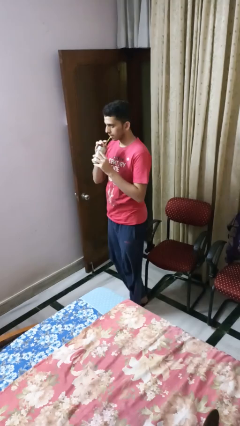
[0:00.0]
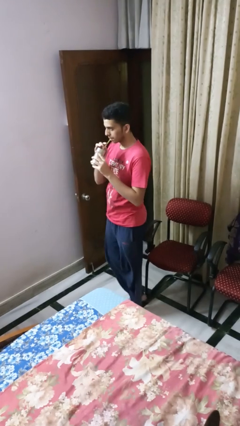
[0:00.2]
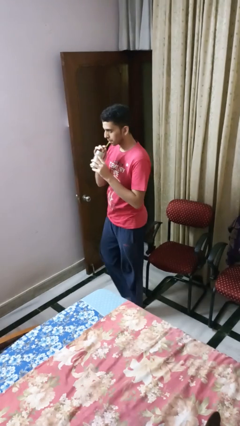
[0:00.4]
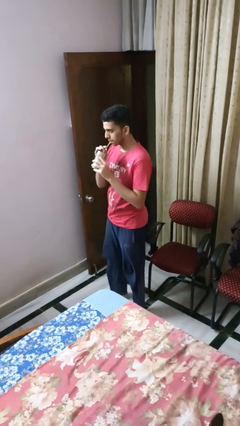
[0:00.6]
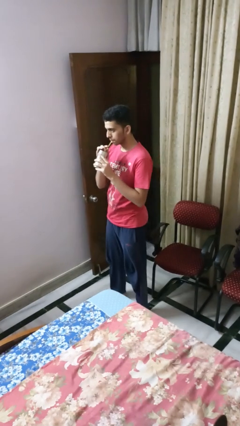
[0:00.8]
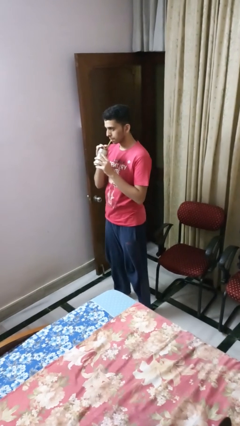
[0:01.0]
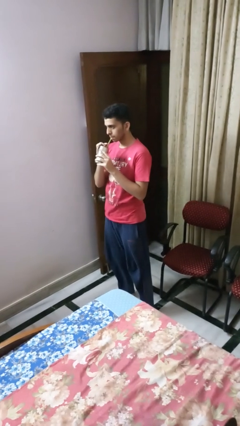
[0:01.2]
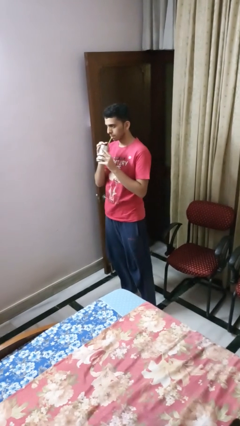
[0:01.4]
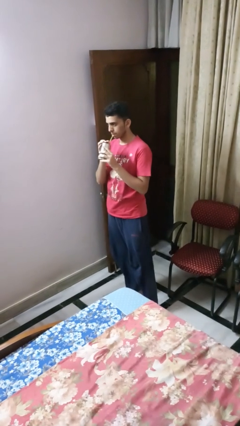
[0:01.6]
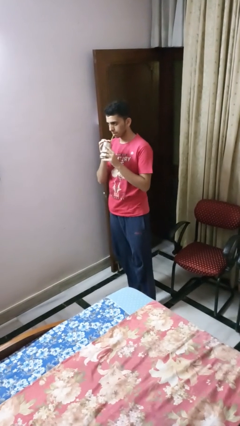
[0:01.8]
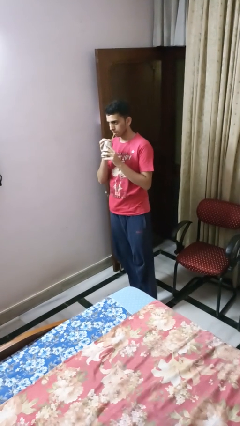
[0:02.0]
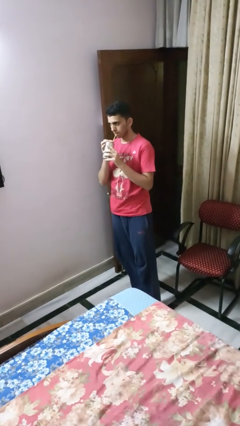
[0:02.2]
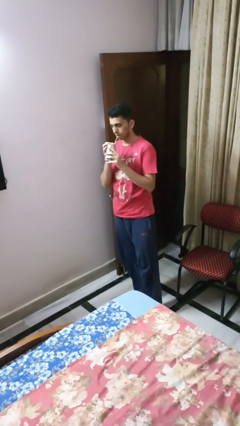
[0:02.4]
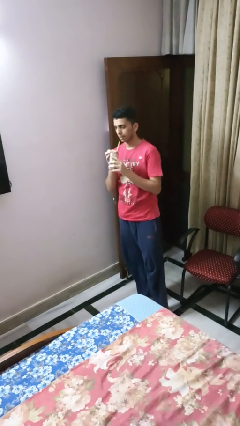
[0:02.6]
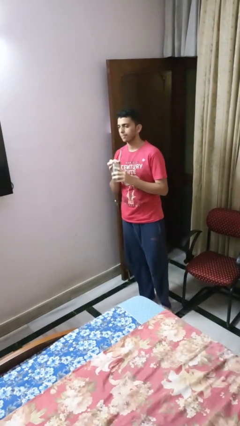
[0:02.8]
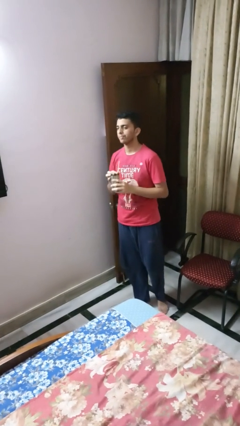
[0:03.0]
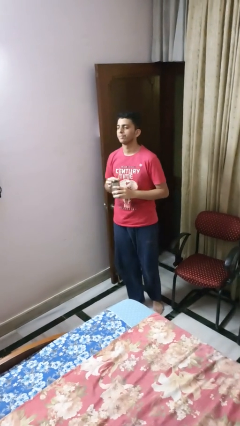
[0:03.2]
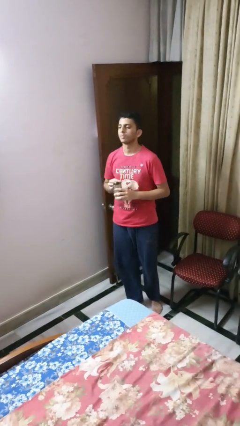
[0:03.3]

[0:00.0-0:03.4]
person drinks from straw

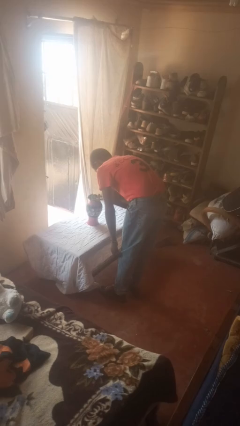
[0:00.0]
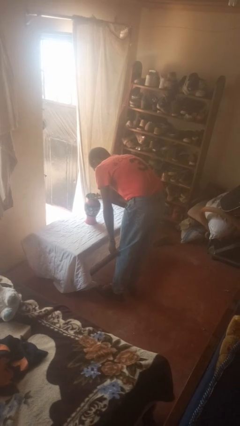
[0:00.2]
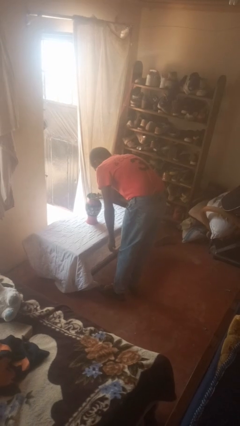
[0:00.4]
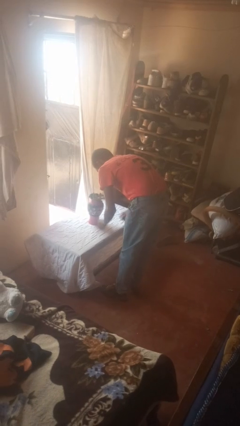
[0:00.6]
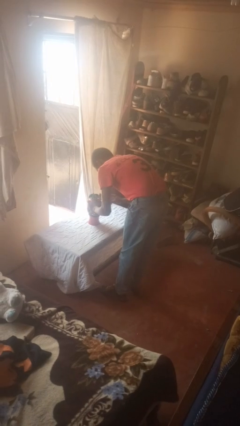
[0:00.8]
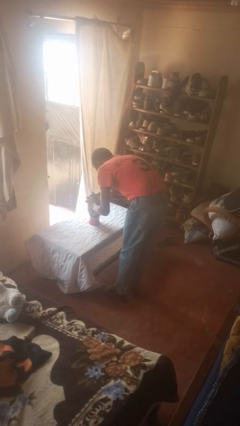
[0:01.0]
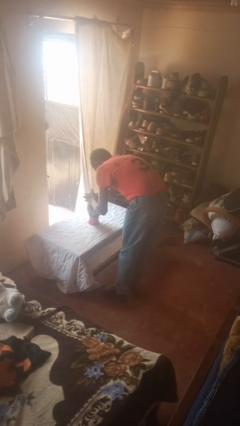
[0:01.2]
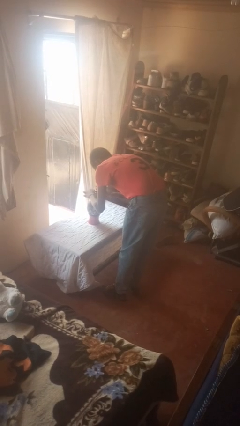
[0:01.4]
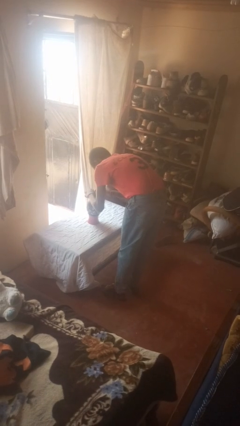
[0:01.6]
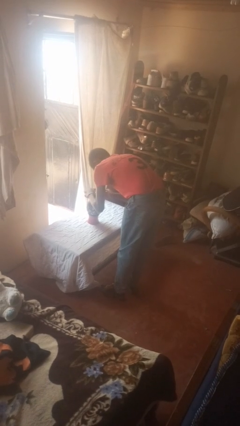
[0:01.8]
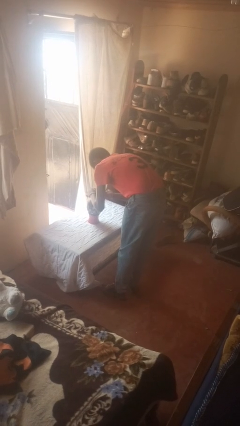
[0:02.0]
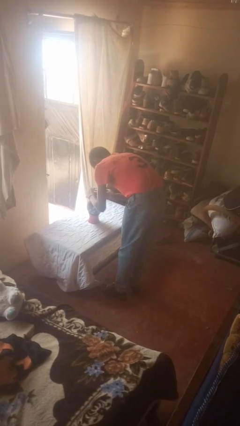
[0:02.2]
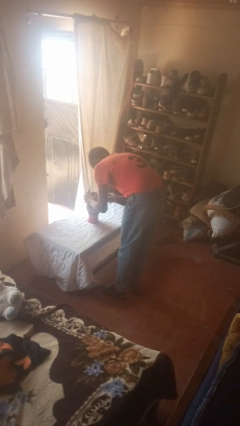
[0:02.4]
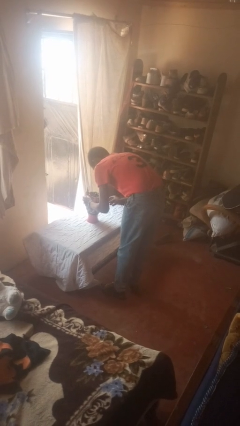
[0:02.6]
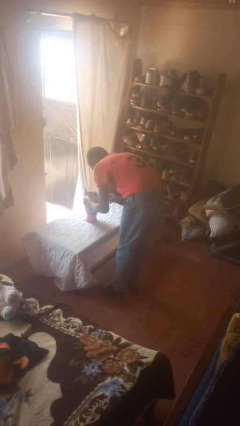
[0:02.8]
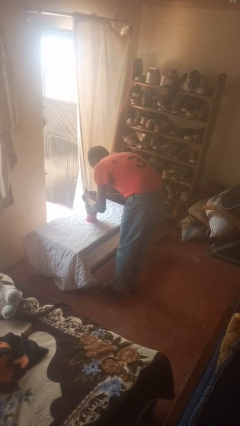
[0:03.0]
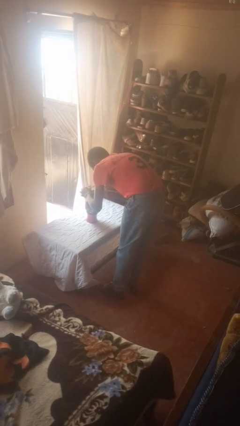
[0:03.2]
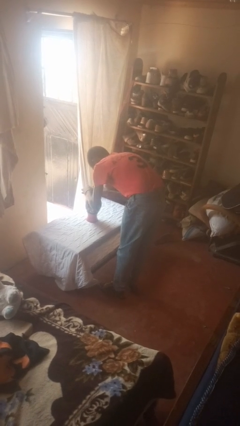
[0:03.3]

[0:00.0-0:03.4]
person arranges flowers in vase

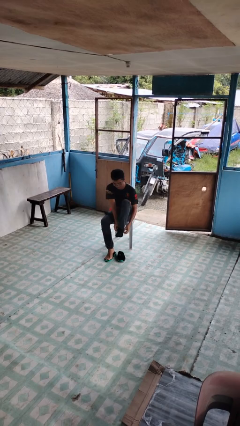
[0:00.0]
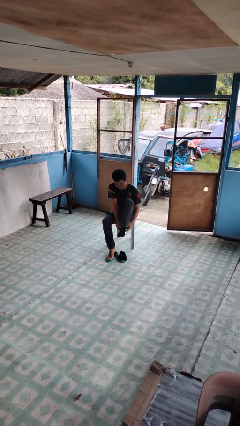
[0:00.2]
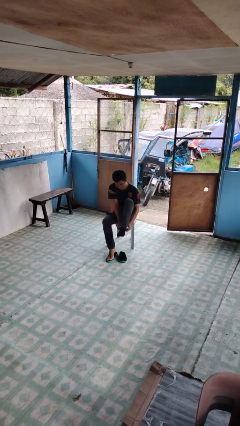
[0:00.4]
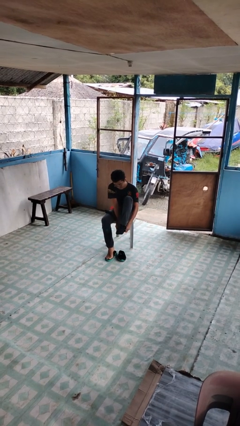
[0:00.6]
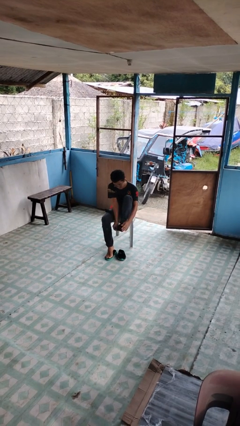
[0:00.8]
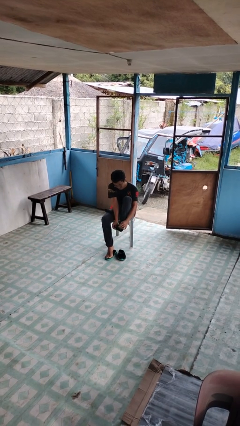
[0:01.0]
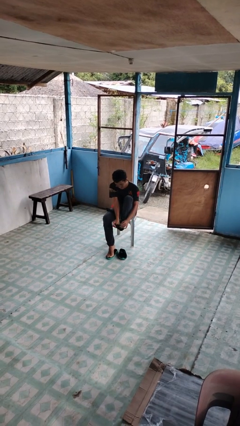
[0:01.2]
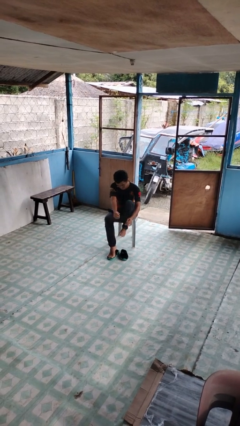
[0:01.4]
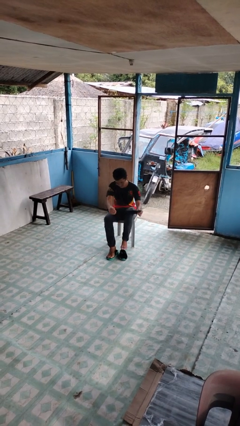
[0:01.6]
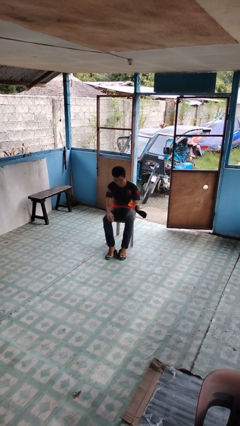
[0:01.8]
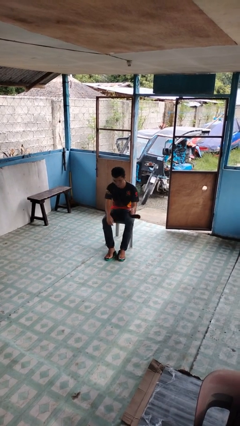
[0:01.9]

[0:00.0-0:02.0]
person takes off socks

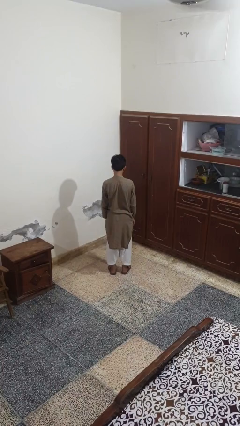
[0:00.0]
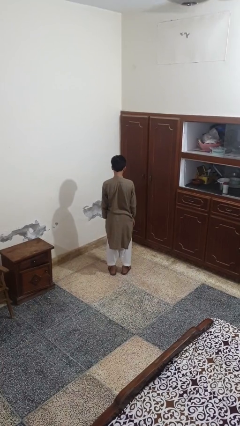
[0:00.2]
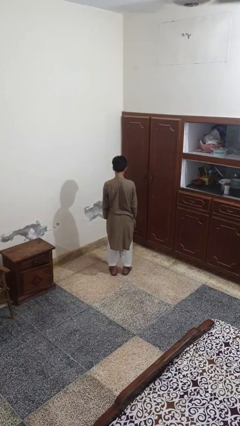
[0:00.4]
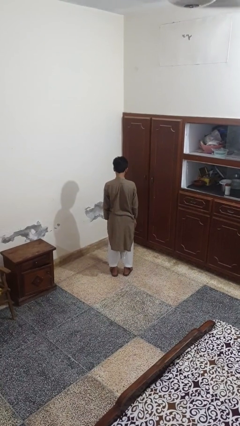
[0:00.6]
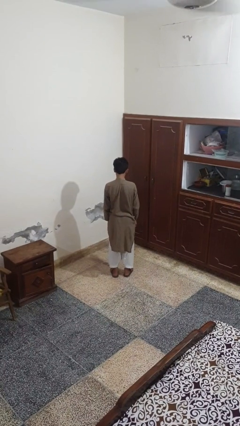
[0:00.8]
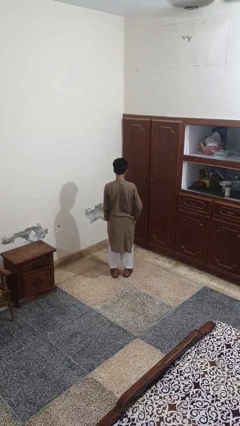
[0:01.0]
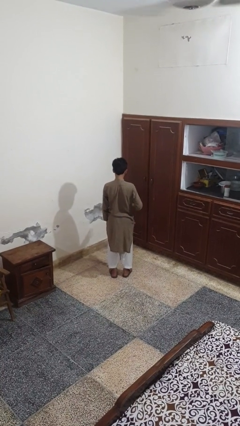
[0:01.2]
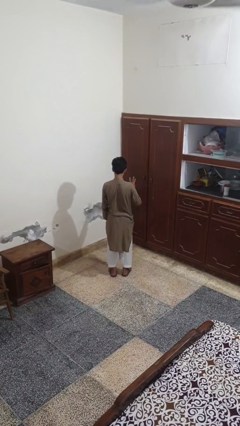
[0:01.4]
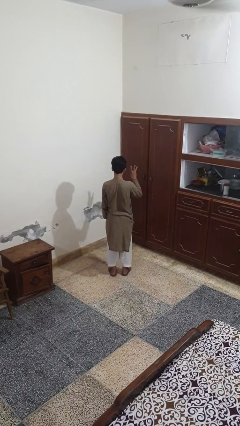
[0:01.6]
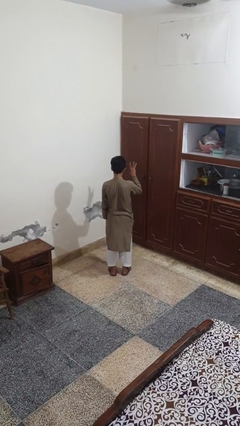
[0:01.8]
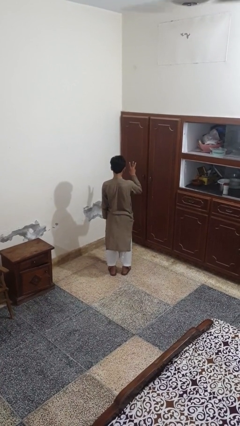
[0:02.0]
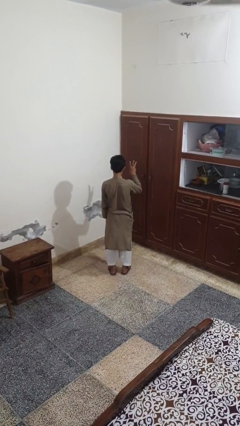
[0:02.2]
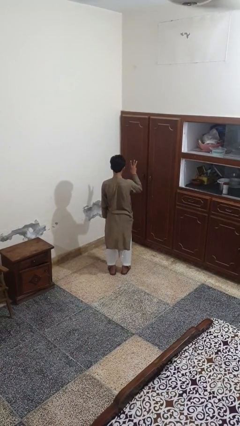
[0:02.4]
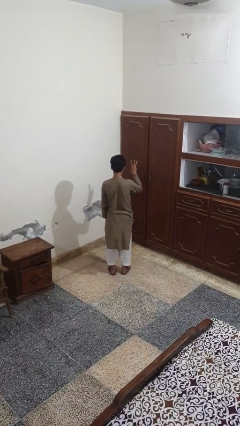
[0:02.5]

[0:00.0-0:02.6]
person gestures number three

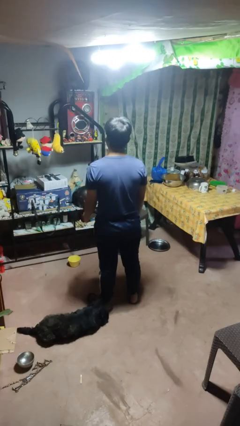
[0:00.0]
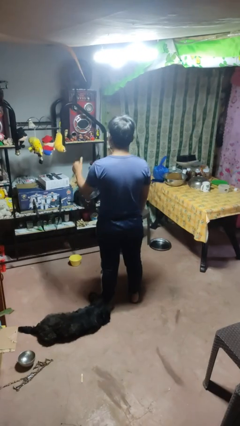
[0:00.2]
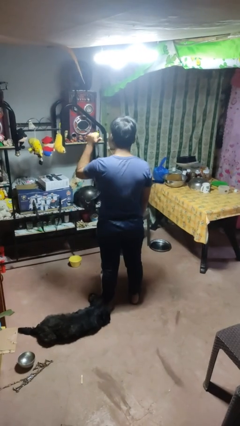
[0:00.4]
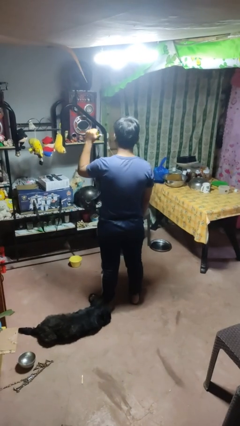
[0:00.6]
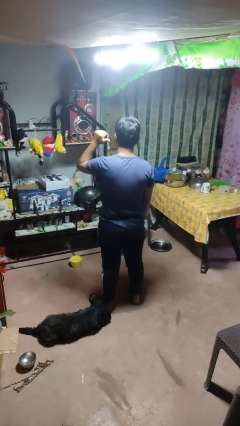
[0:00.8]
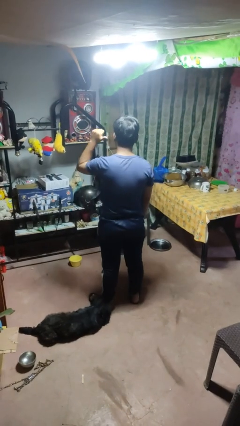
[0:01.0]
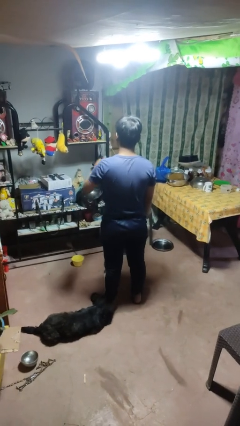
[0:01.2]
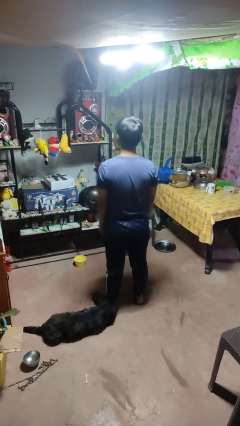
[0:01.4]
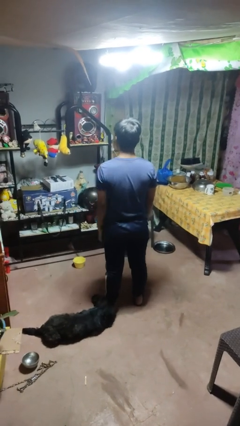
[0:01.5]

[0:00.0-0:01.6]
person gestures behind me

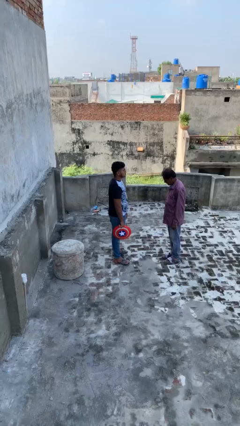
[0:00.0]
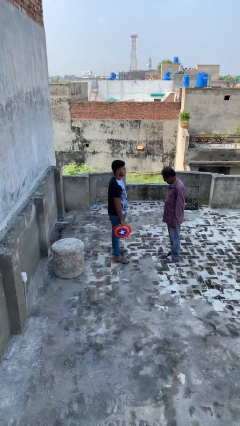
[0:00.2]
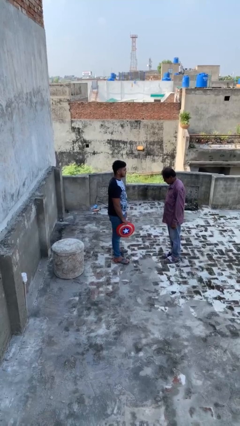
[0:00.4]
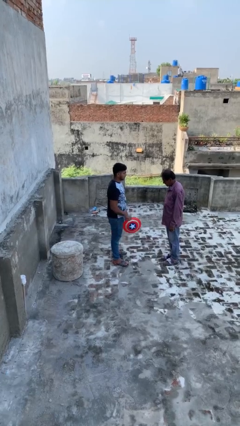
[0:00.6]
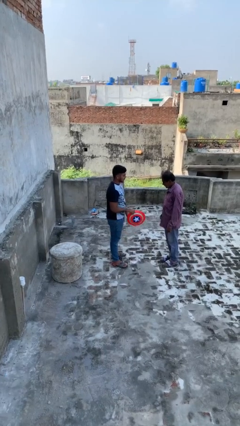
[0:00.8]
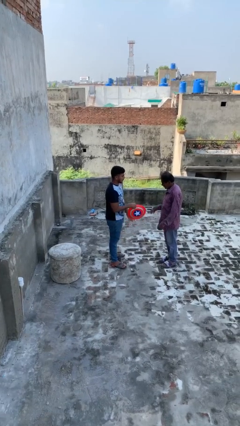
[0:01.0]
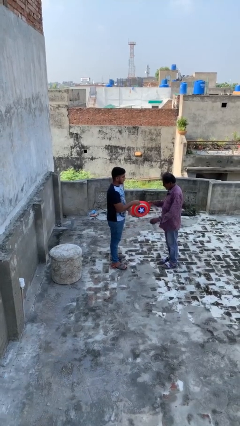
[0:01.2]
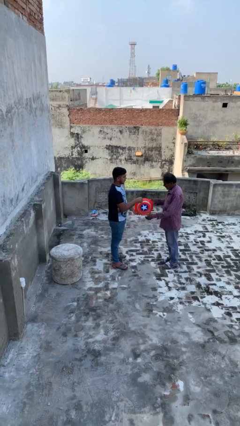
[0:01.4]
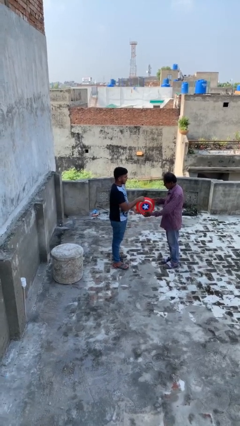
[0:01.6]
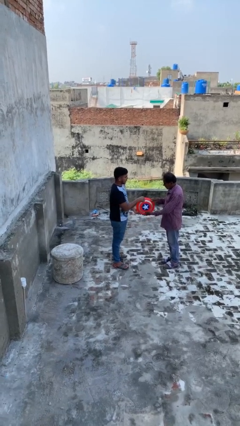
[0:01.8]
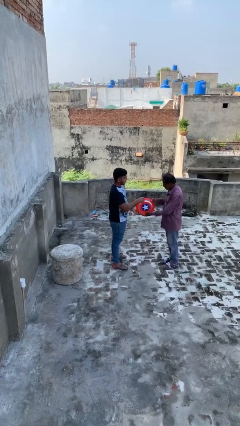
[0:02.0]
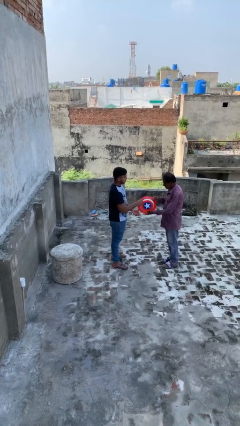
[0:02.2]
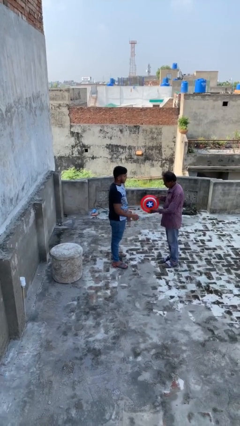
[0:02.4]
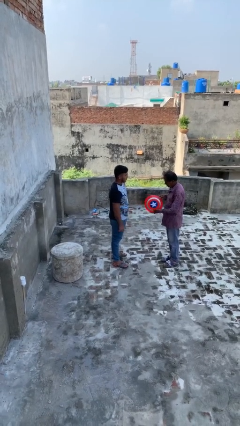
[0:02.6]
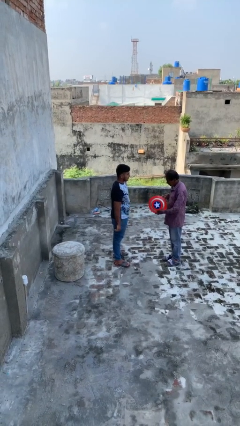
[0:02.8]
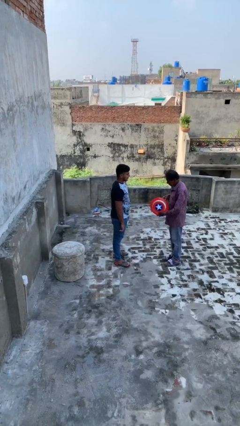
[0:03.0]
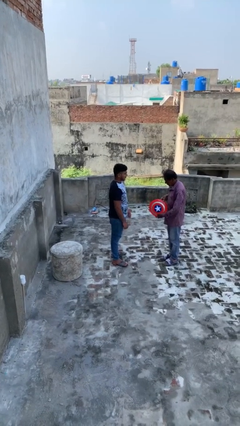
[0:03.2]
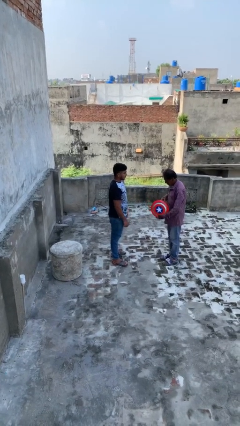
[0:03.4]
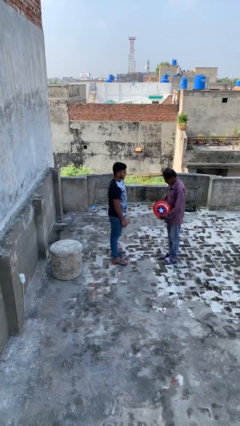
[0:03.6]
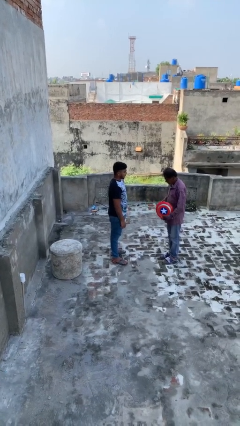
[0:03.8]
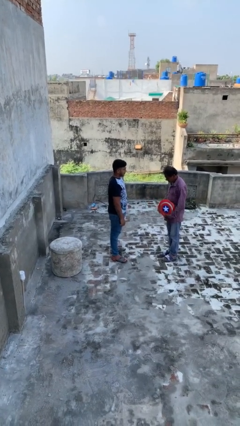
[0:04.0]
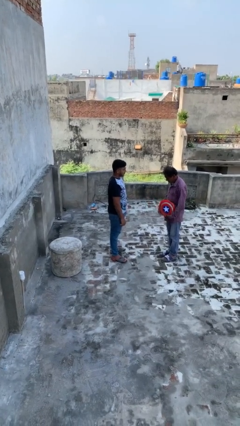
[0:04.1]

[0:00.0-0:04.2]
person transfers object to person
